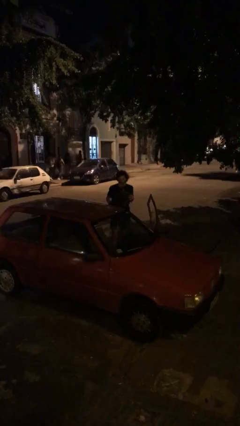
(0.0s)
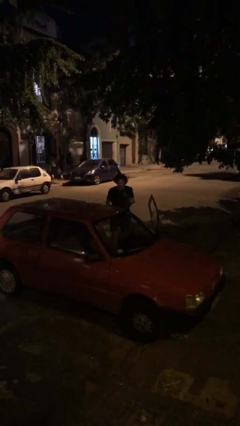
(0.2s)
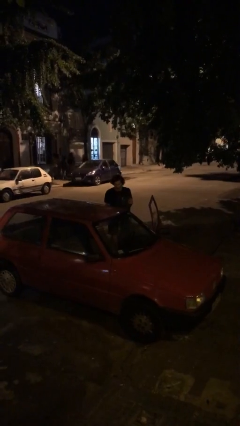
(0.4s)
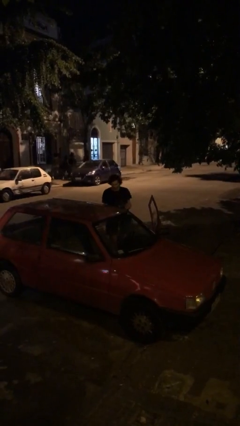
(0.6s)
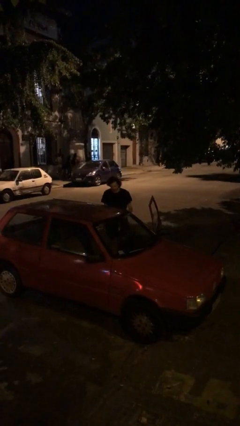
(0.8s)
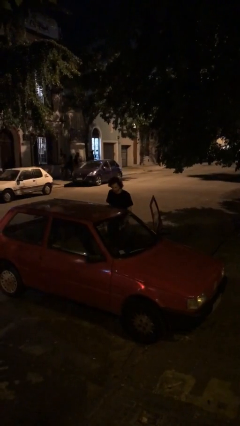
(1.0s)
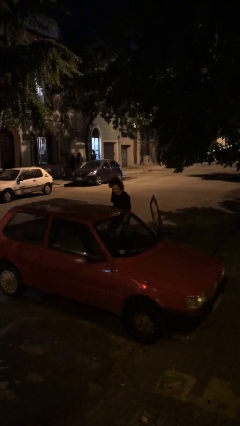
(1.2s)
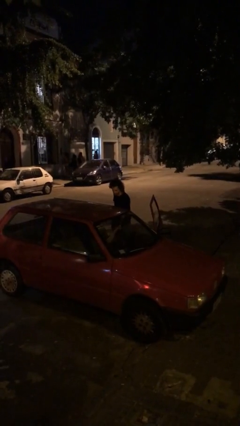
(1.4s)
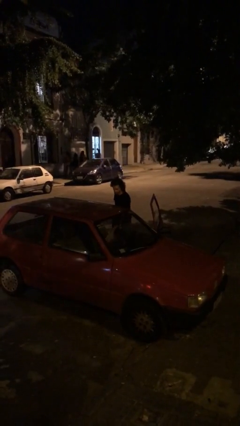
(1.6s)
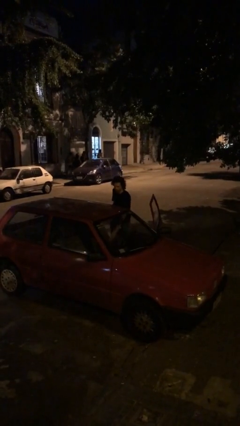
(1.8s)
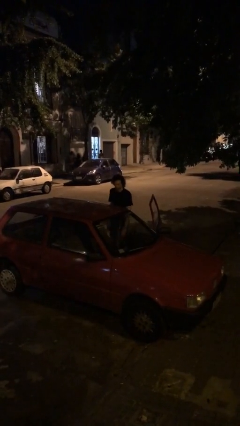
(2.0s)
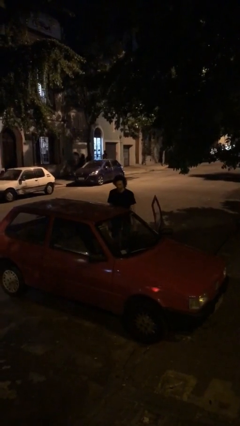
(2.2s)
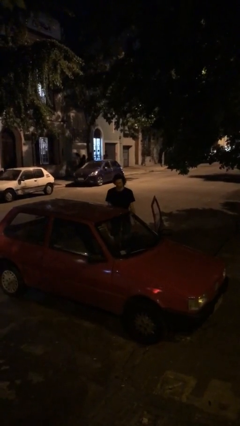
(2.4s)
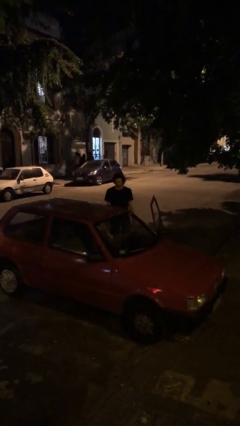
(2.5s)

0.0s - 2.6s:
person loads car

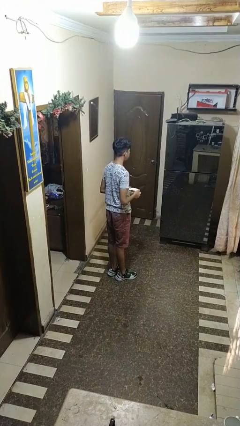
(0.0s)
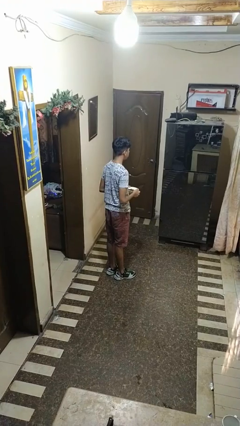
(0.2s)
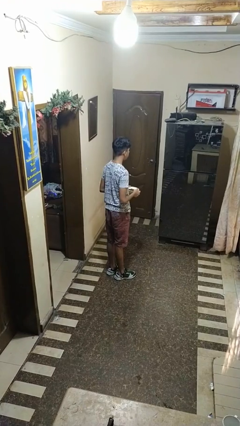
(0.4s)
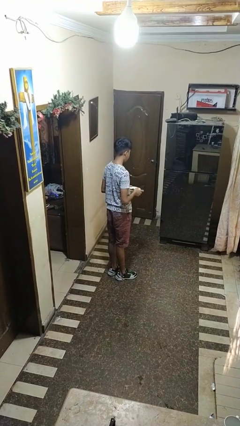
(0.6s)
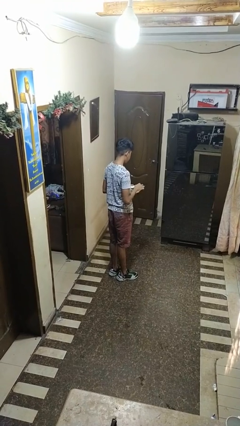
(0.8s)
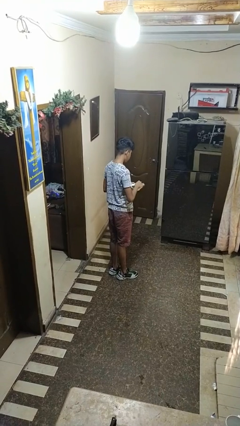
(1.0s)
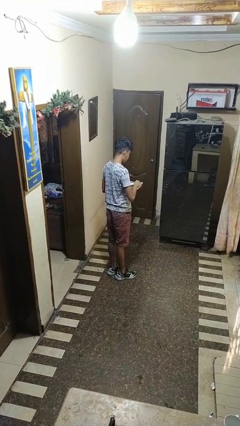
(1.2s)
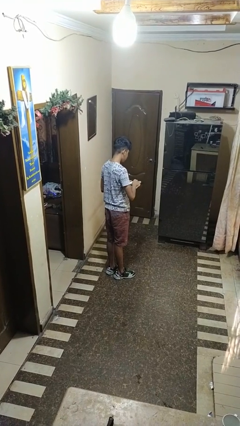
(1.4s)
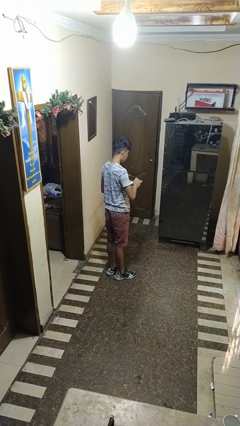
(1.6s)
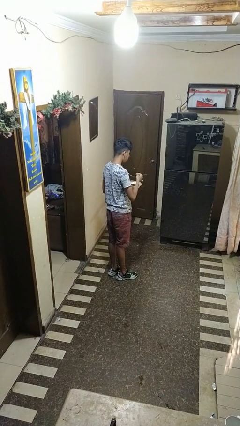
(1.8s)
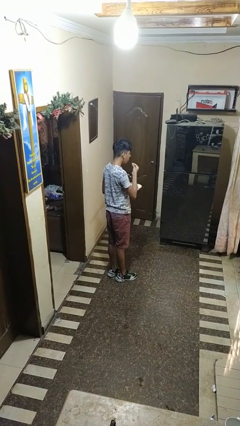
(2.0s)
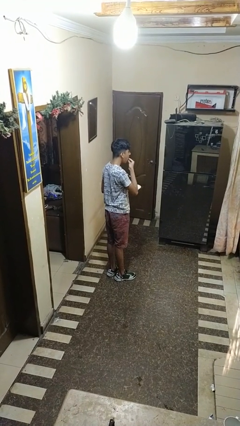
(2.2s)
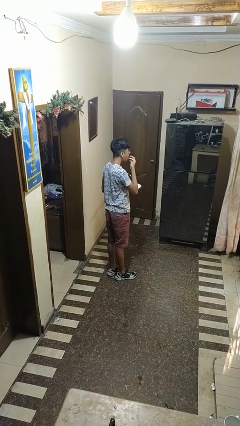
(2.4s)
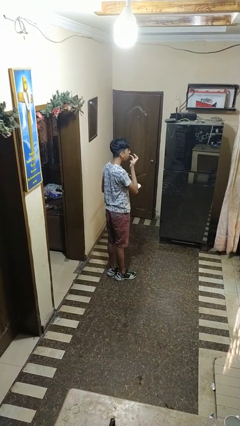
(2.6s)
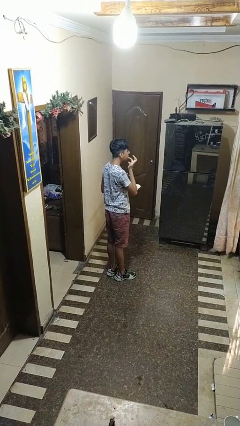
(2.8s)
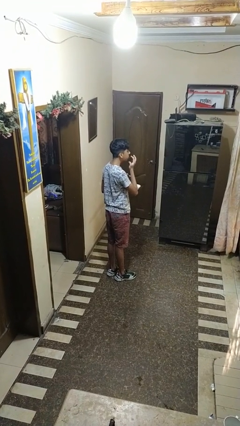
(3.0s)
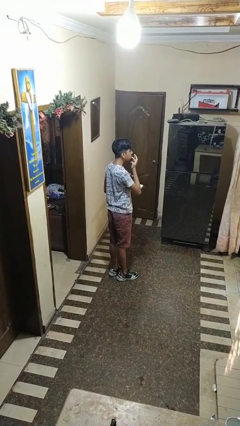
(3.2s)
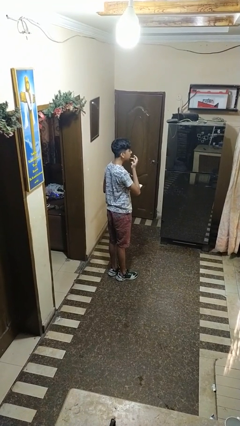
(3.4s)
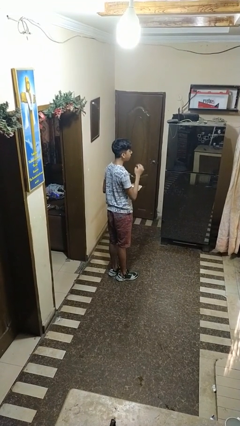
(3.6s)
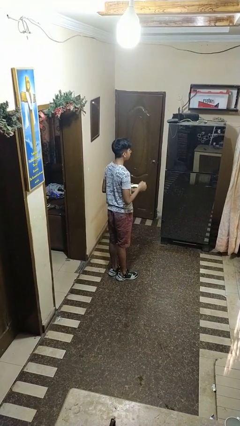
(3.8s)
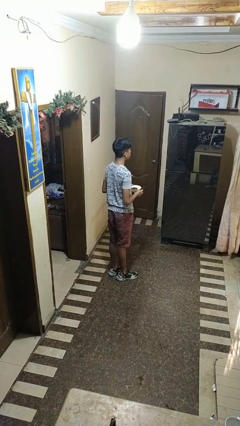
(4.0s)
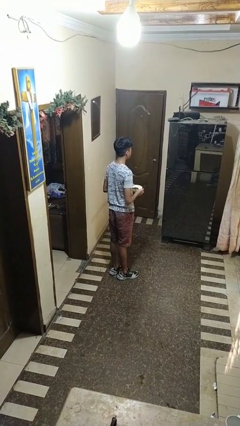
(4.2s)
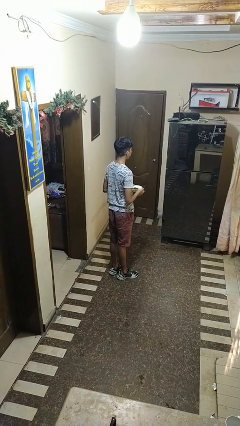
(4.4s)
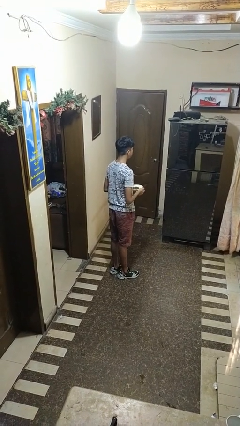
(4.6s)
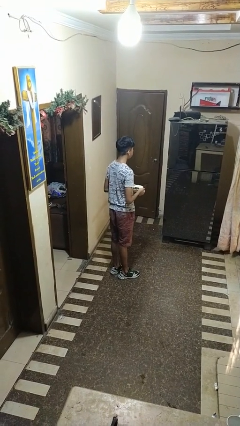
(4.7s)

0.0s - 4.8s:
person licks fingers

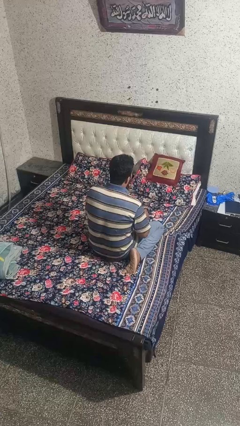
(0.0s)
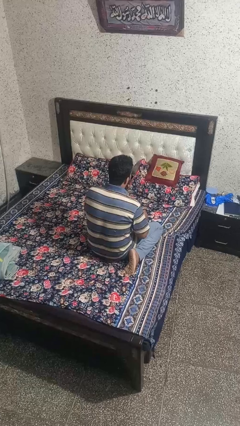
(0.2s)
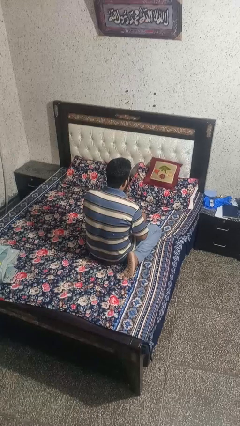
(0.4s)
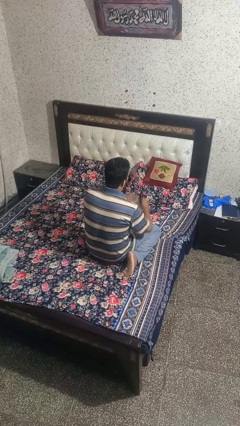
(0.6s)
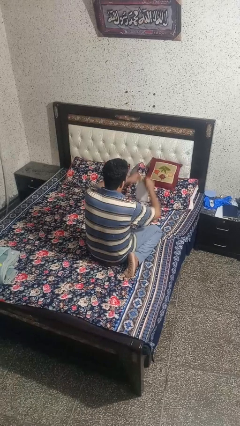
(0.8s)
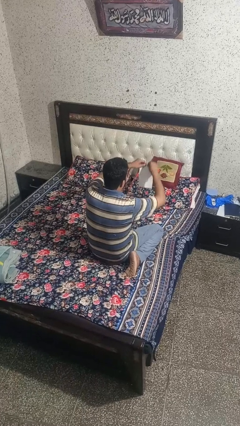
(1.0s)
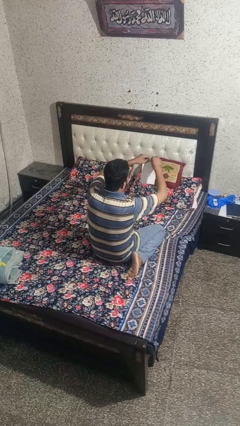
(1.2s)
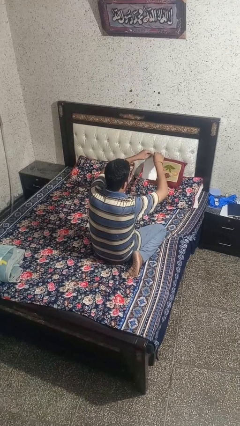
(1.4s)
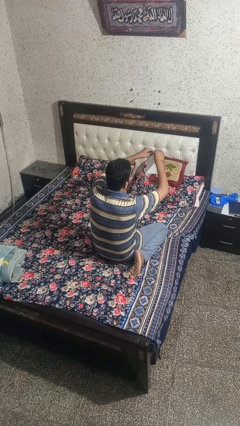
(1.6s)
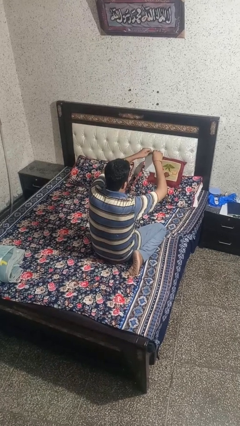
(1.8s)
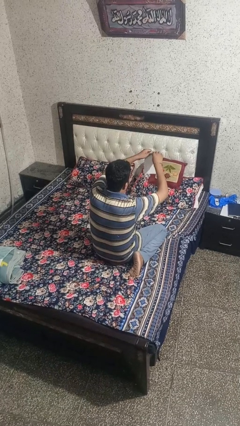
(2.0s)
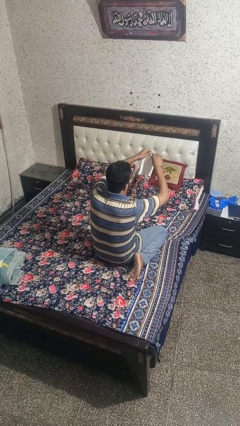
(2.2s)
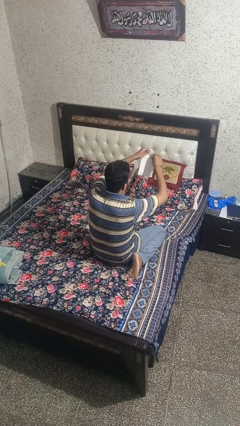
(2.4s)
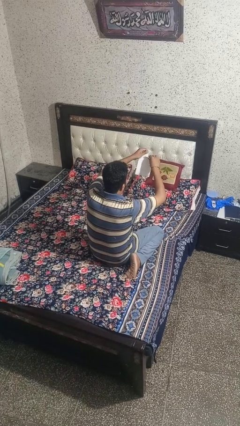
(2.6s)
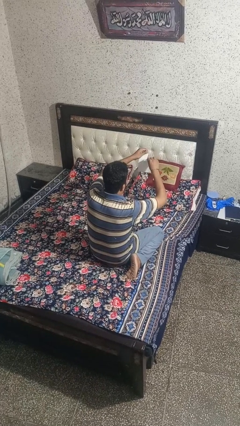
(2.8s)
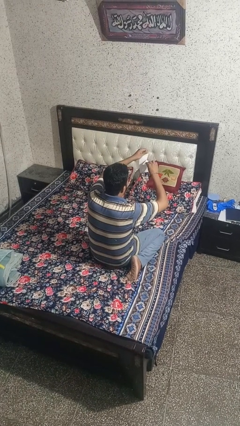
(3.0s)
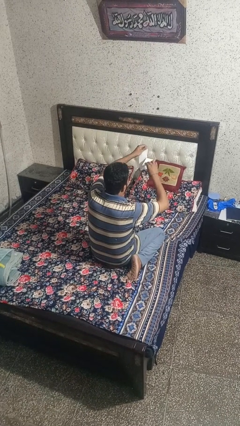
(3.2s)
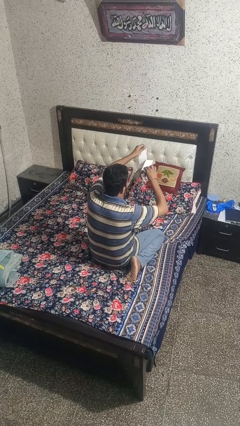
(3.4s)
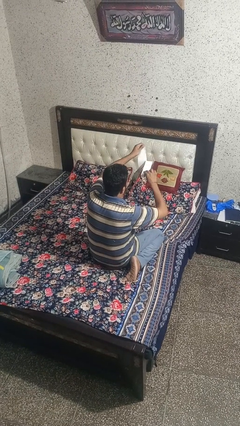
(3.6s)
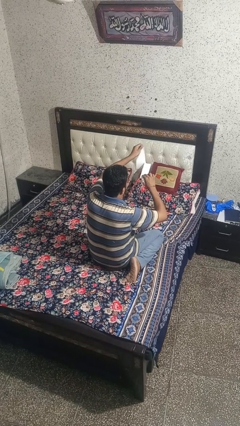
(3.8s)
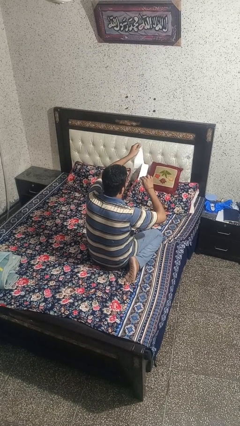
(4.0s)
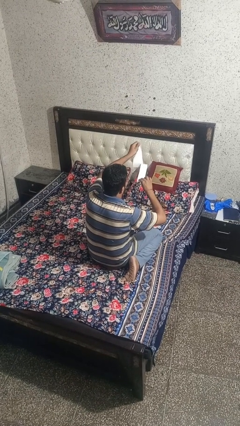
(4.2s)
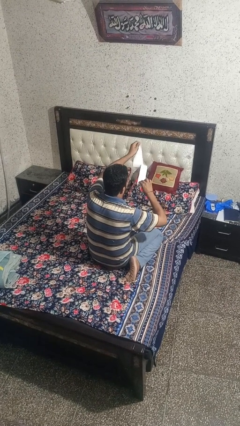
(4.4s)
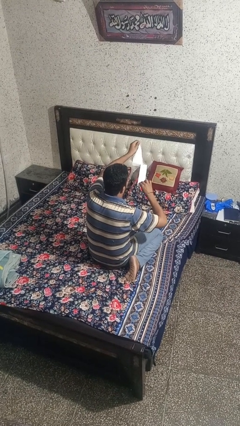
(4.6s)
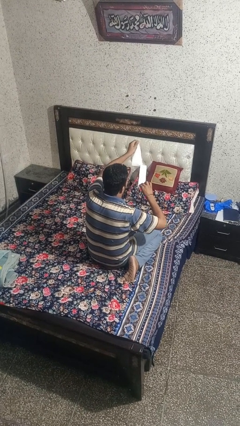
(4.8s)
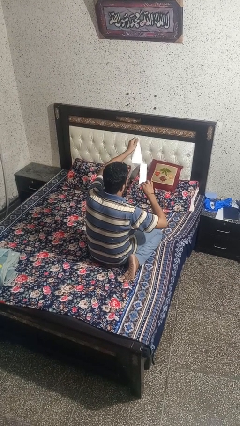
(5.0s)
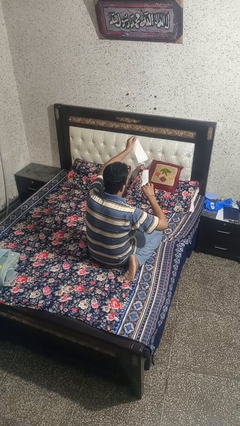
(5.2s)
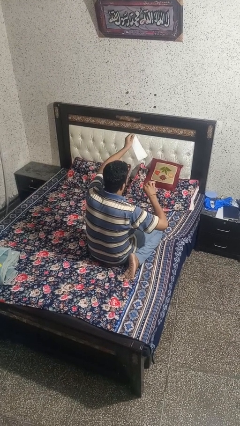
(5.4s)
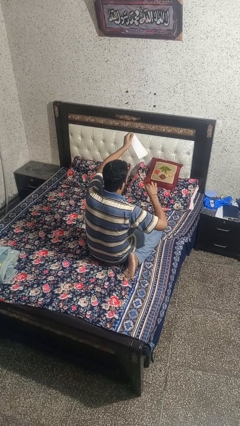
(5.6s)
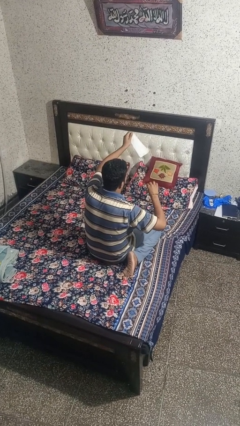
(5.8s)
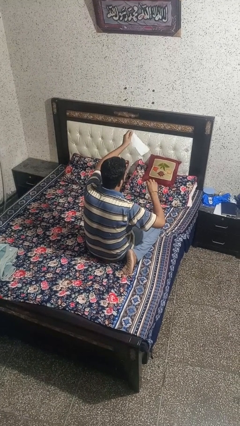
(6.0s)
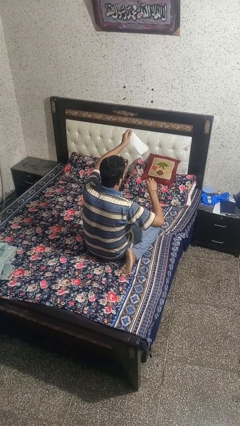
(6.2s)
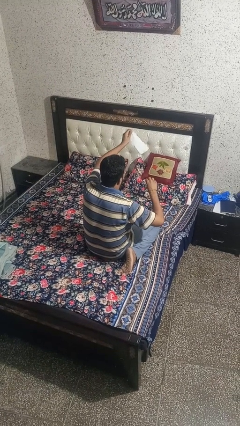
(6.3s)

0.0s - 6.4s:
person tears paper

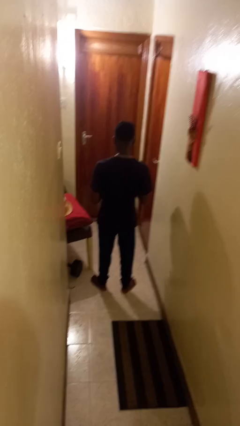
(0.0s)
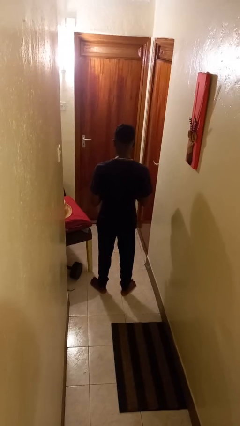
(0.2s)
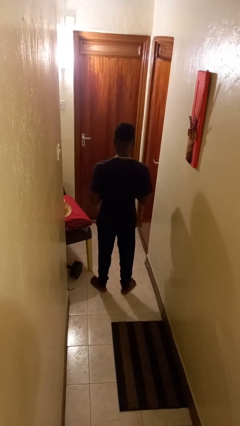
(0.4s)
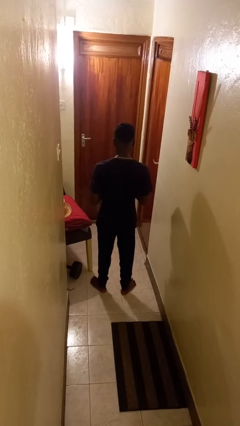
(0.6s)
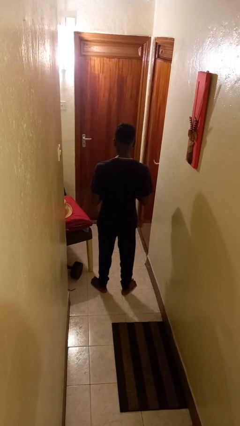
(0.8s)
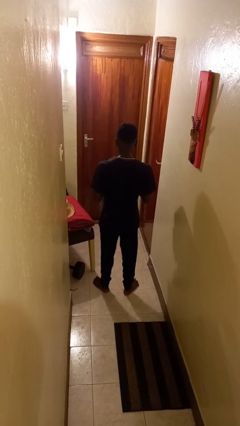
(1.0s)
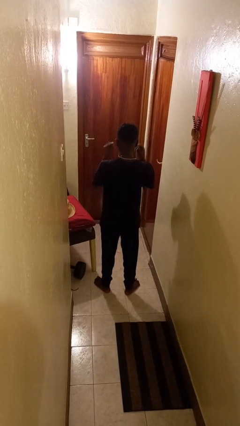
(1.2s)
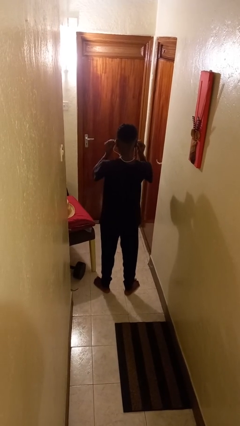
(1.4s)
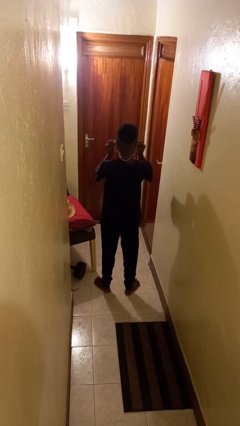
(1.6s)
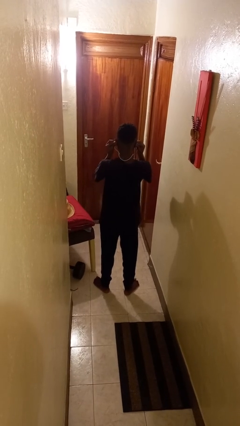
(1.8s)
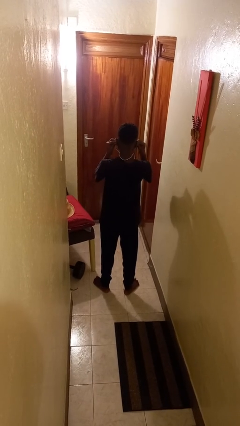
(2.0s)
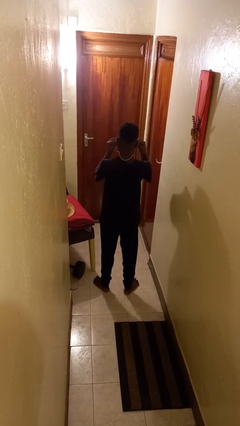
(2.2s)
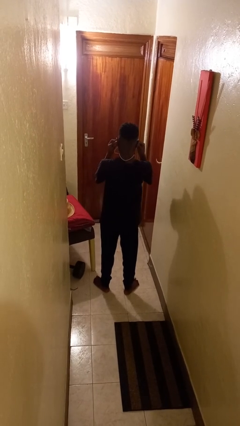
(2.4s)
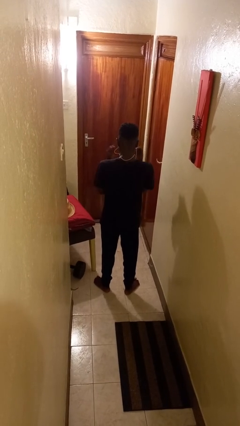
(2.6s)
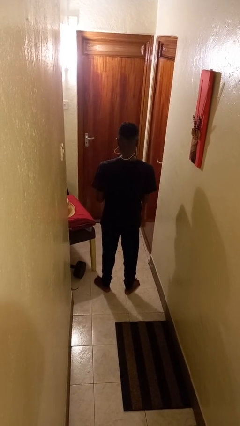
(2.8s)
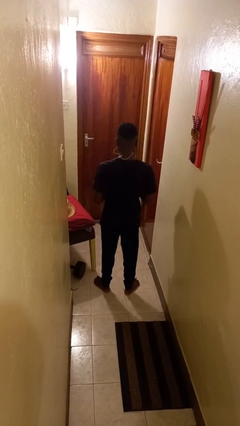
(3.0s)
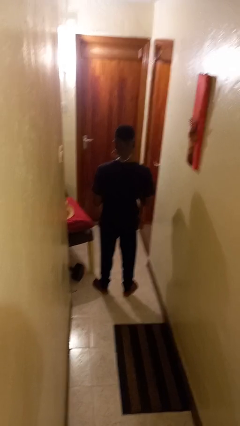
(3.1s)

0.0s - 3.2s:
person puts on headphones

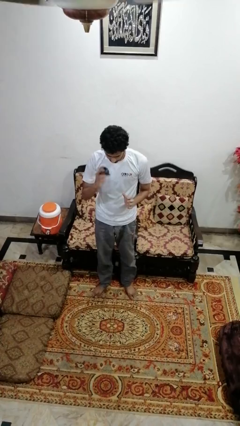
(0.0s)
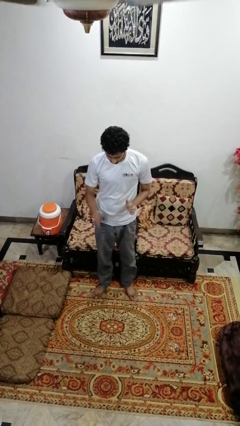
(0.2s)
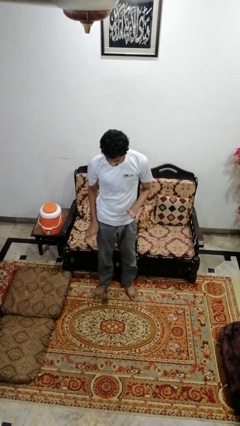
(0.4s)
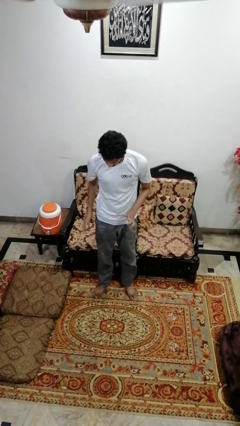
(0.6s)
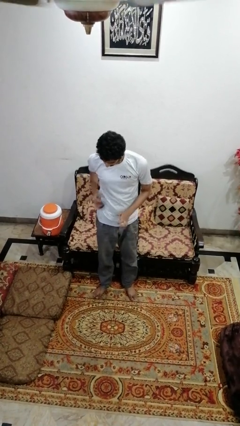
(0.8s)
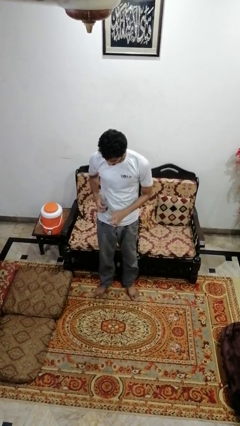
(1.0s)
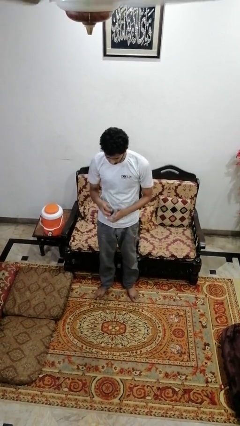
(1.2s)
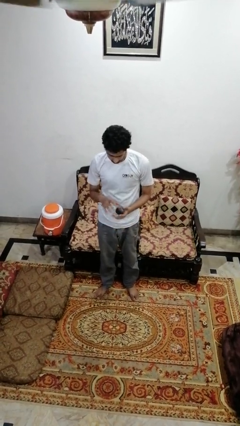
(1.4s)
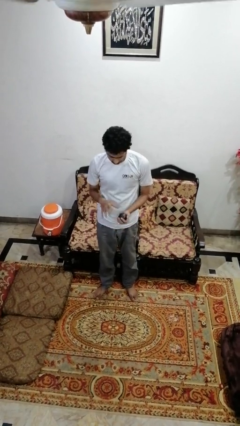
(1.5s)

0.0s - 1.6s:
person bounces ball on floor
